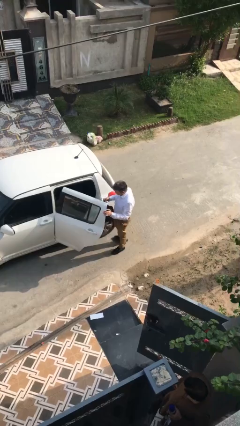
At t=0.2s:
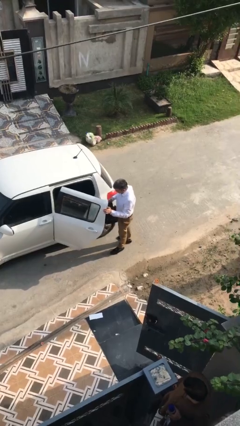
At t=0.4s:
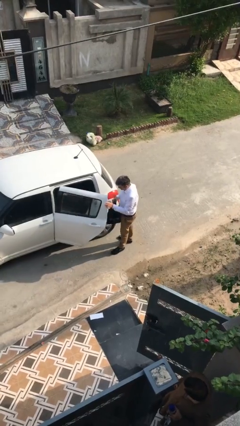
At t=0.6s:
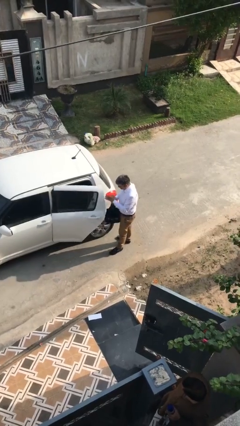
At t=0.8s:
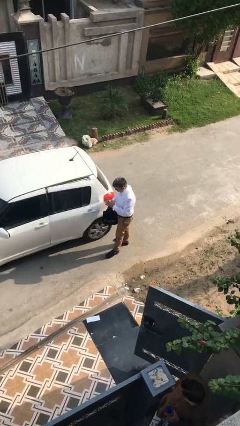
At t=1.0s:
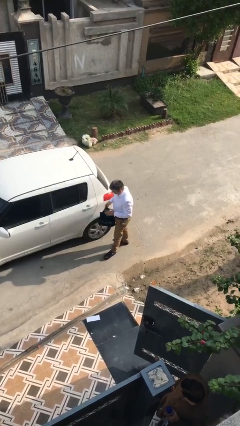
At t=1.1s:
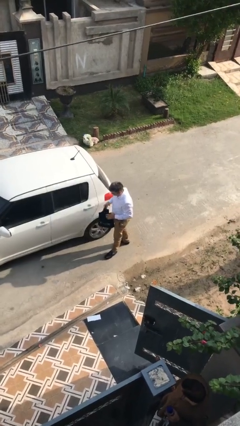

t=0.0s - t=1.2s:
person closes car door

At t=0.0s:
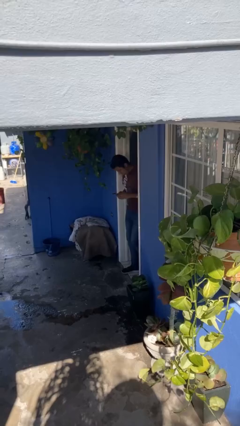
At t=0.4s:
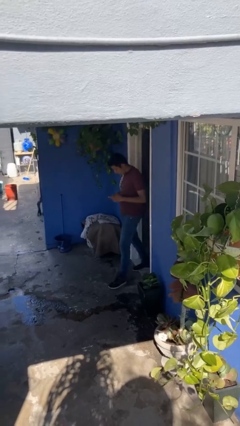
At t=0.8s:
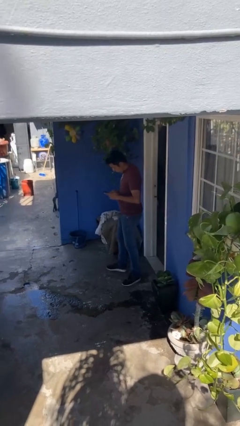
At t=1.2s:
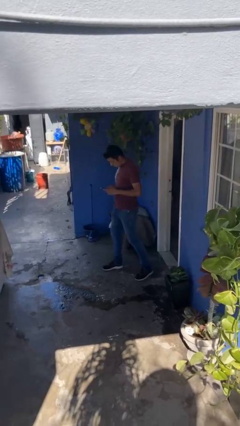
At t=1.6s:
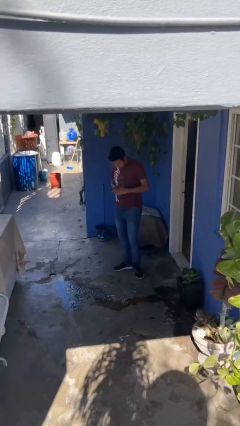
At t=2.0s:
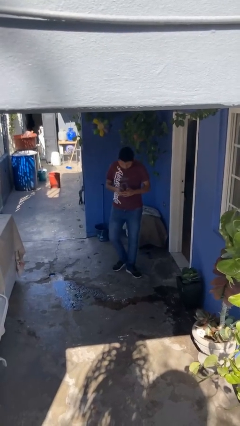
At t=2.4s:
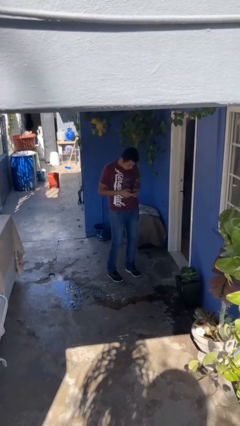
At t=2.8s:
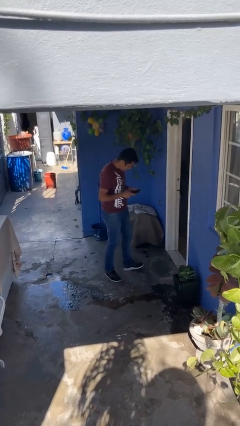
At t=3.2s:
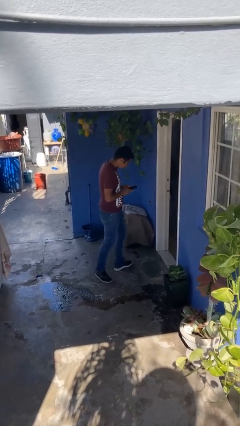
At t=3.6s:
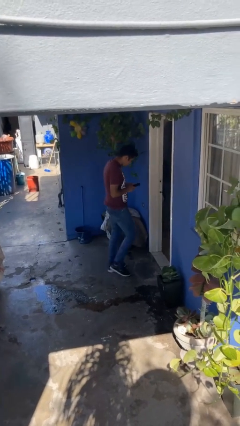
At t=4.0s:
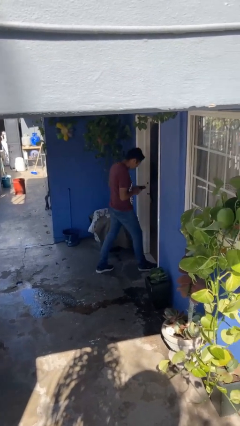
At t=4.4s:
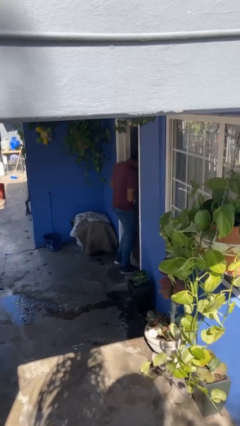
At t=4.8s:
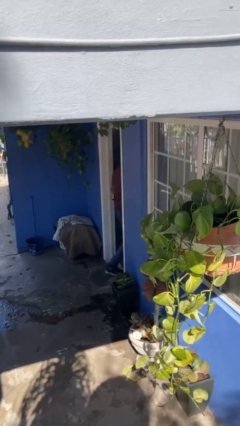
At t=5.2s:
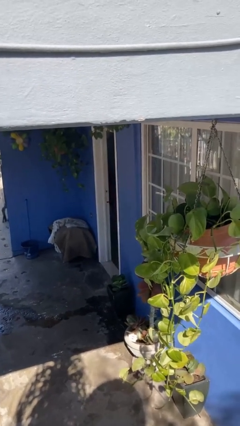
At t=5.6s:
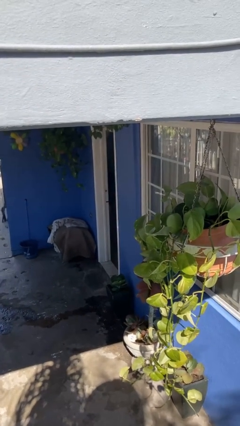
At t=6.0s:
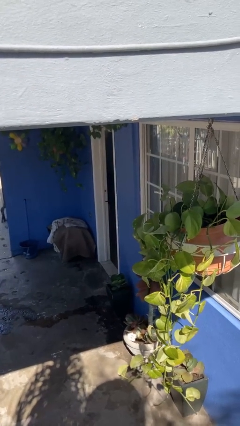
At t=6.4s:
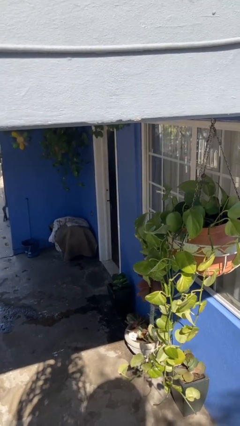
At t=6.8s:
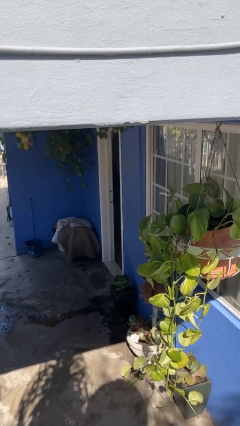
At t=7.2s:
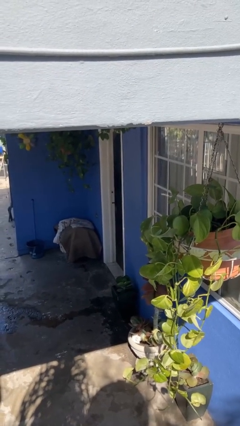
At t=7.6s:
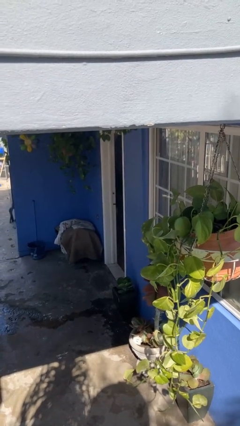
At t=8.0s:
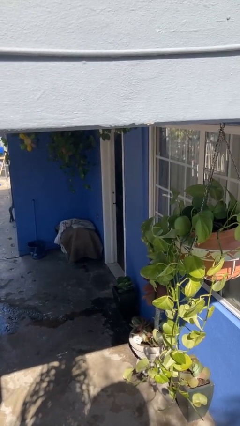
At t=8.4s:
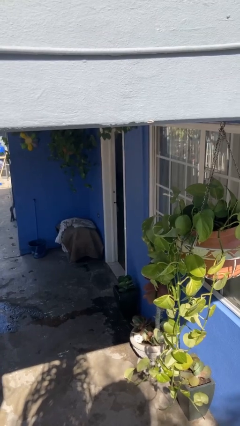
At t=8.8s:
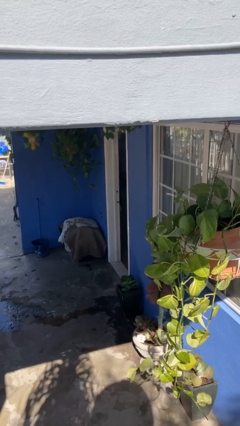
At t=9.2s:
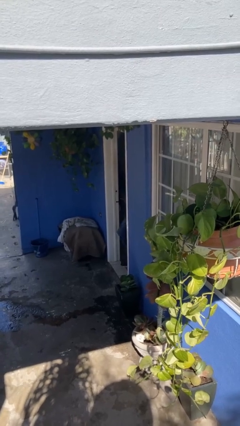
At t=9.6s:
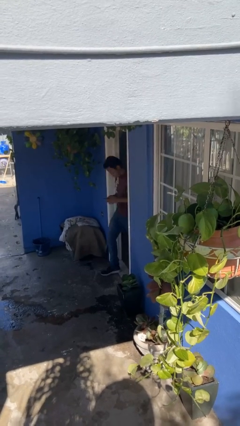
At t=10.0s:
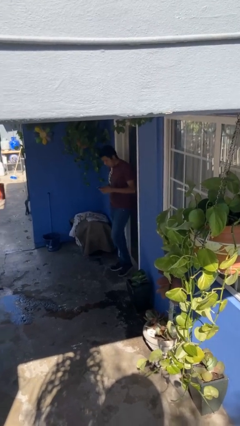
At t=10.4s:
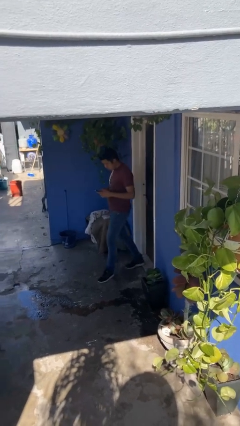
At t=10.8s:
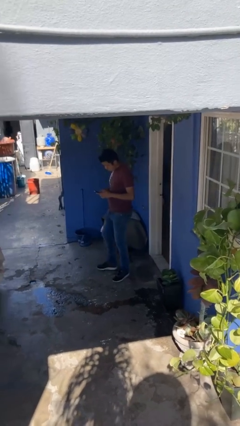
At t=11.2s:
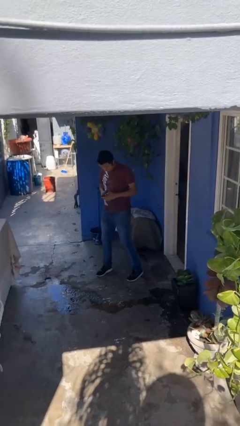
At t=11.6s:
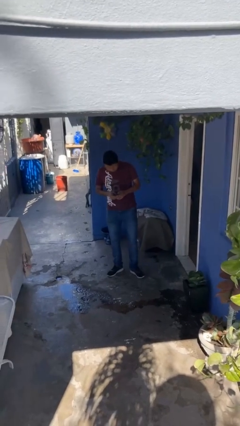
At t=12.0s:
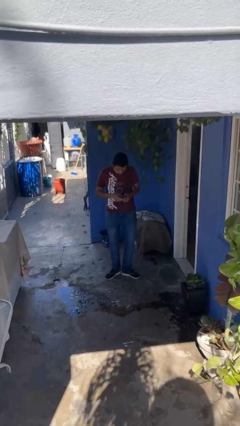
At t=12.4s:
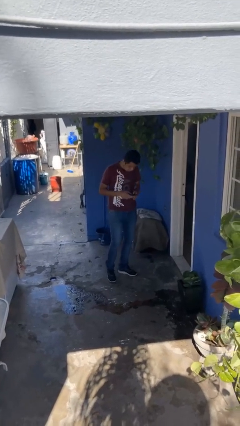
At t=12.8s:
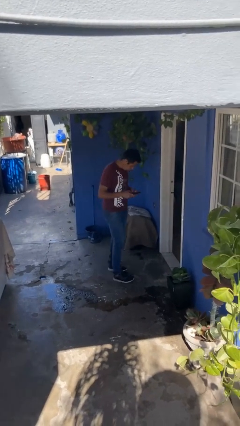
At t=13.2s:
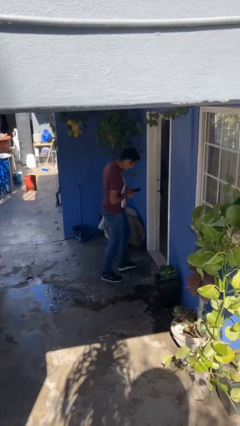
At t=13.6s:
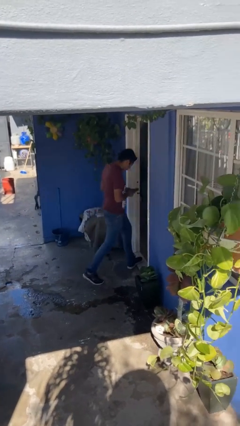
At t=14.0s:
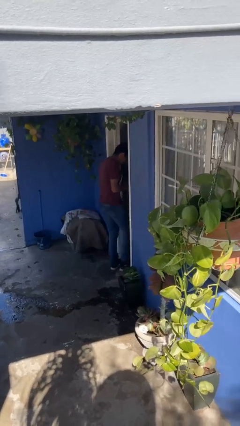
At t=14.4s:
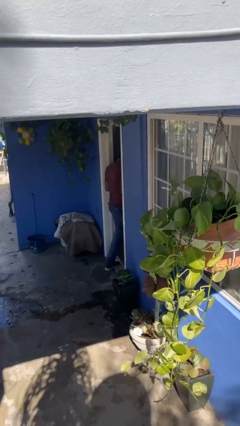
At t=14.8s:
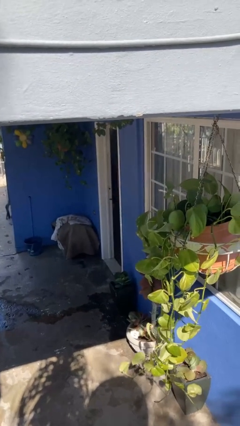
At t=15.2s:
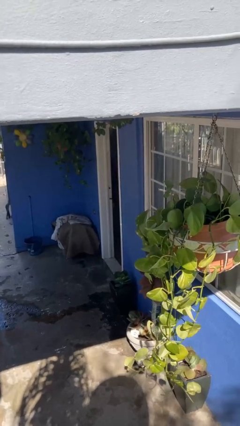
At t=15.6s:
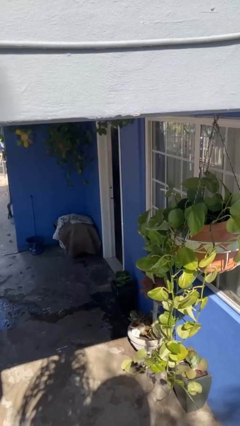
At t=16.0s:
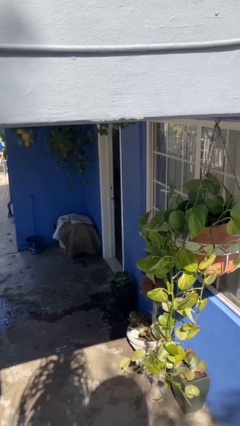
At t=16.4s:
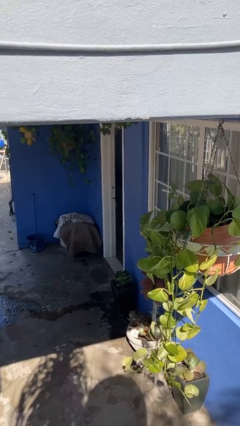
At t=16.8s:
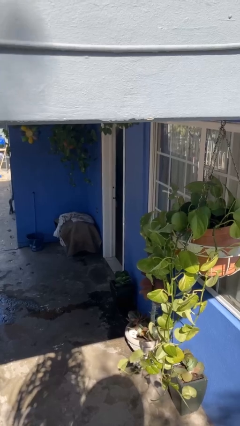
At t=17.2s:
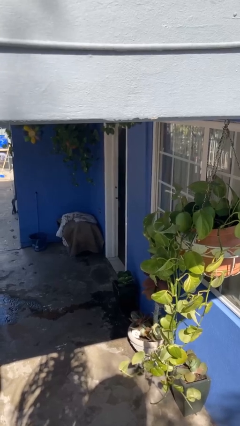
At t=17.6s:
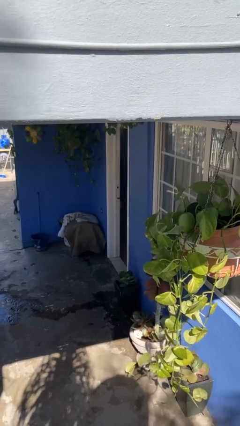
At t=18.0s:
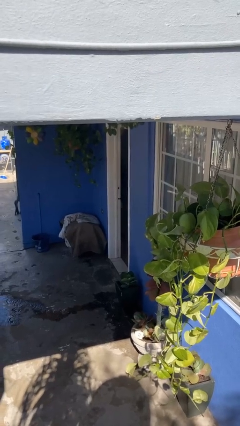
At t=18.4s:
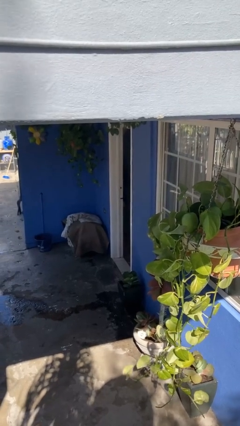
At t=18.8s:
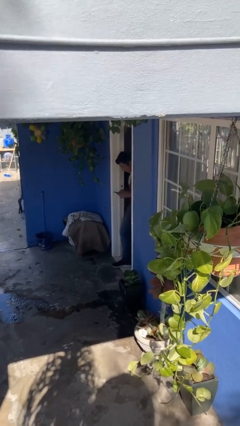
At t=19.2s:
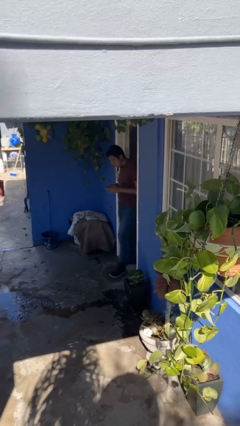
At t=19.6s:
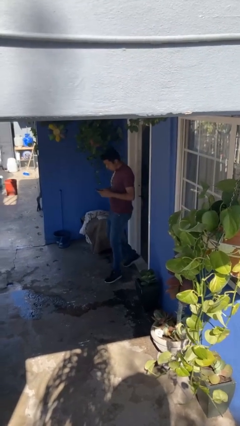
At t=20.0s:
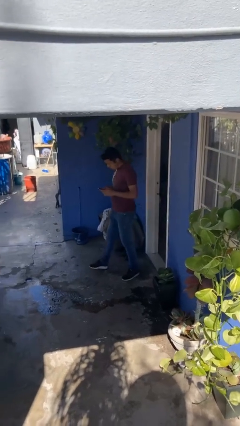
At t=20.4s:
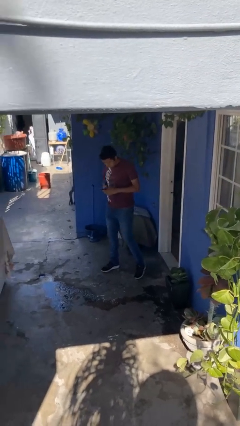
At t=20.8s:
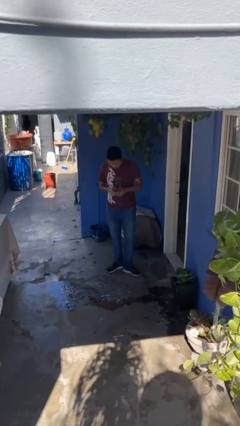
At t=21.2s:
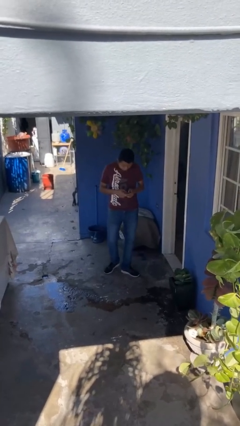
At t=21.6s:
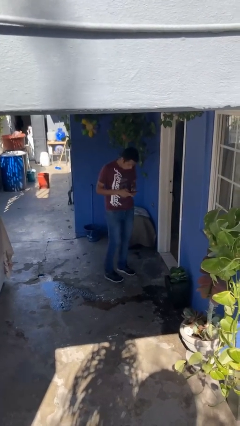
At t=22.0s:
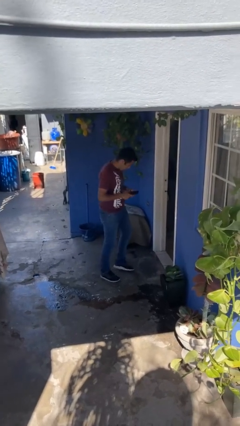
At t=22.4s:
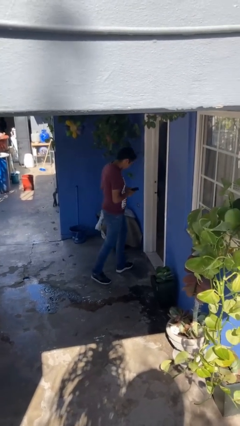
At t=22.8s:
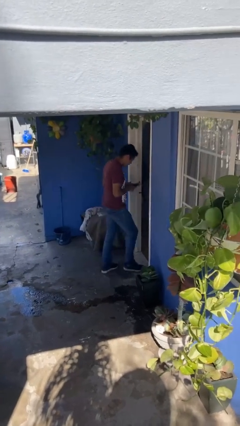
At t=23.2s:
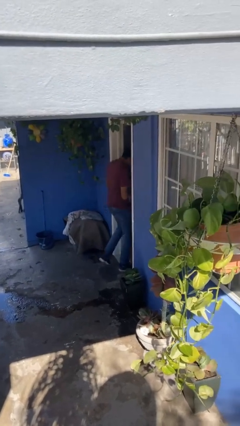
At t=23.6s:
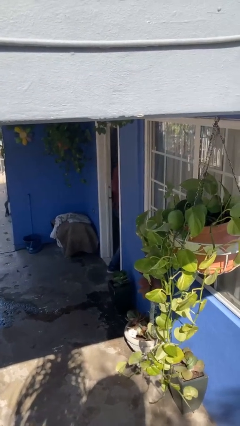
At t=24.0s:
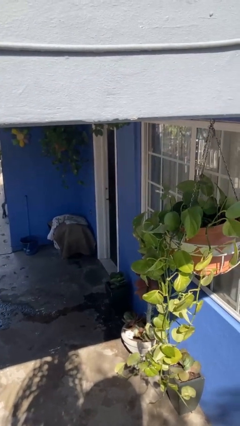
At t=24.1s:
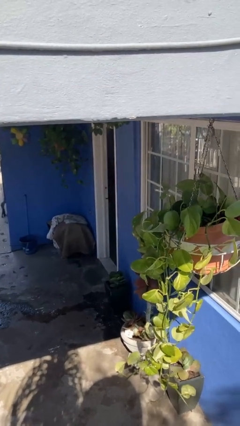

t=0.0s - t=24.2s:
person texts on phone

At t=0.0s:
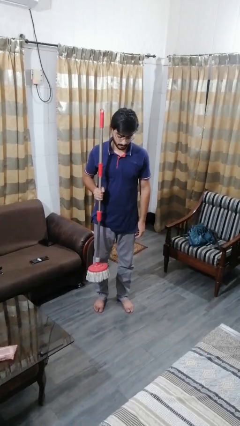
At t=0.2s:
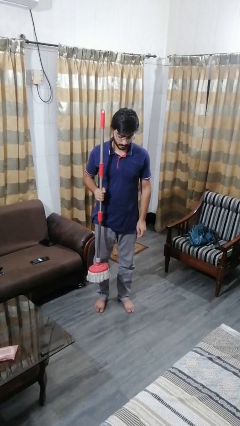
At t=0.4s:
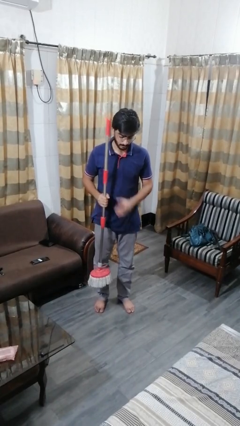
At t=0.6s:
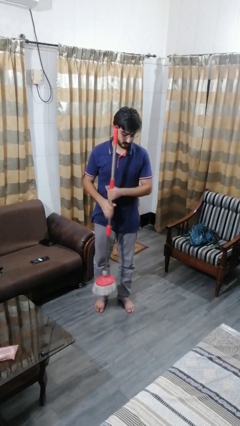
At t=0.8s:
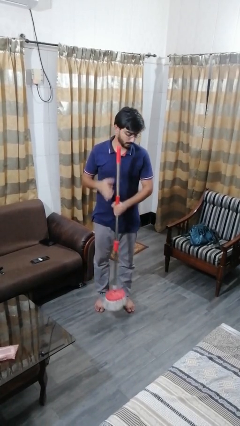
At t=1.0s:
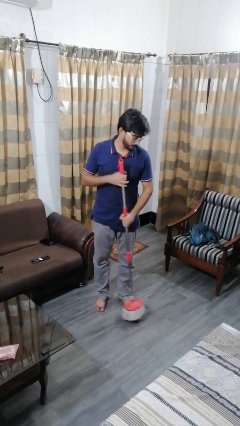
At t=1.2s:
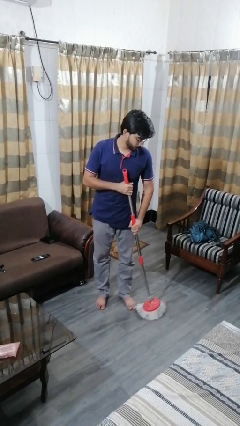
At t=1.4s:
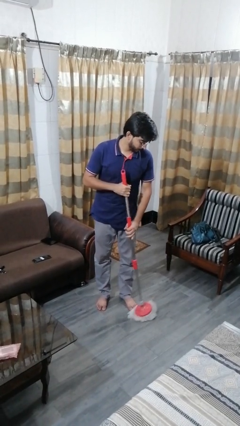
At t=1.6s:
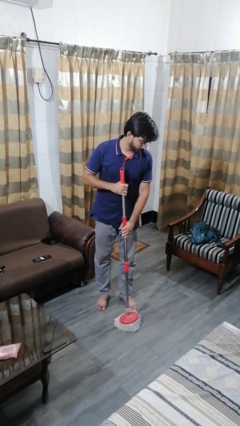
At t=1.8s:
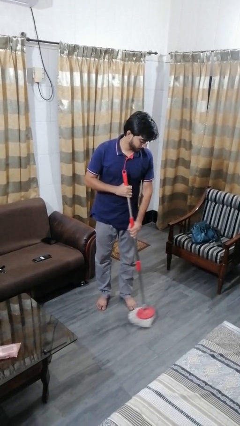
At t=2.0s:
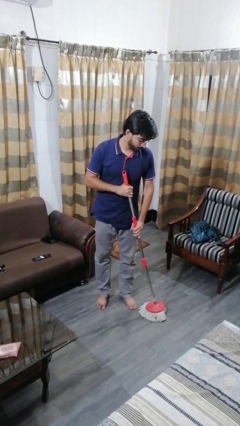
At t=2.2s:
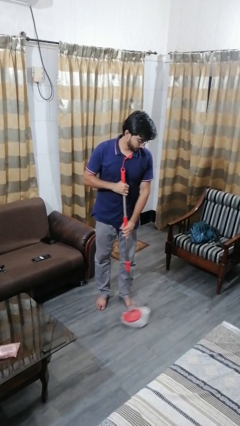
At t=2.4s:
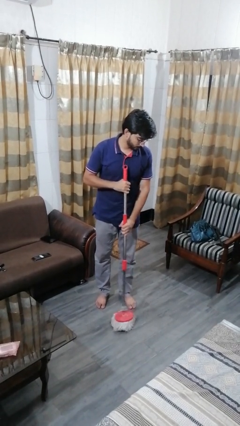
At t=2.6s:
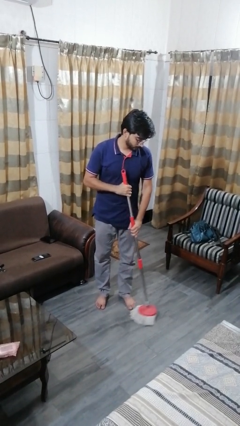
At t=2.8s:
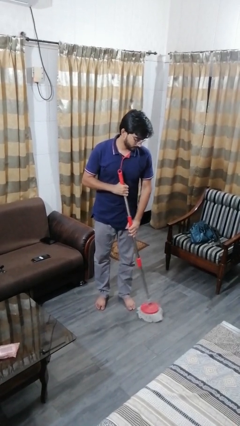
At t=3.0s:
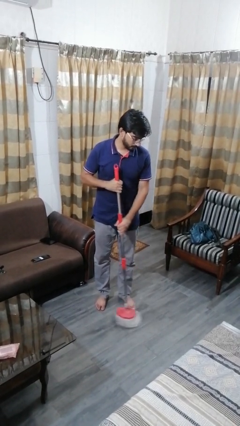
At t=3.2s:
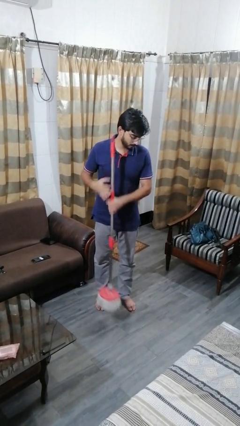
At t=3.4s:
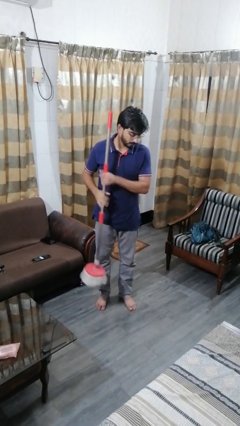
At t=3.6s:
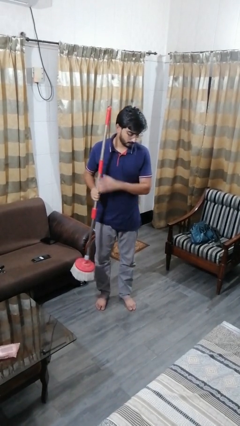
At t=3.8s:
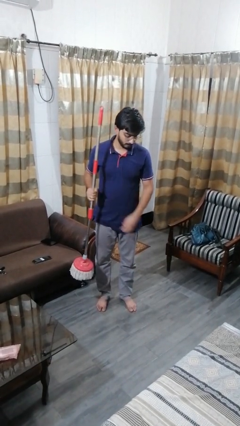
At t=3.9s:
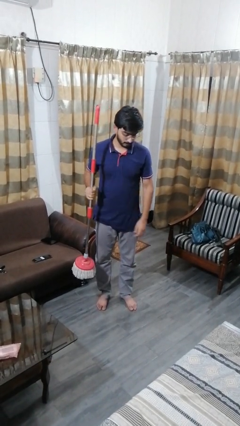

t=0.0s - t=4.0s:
person sweeps floor

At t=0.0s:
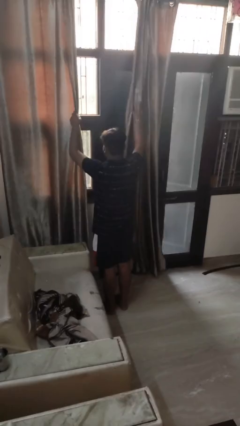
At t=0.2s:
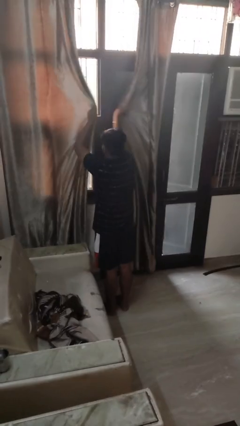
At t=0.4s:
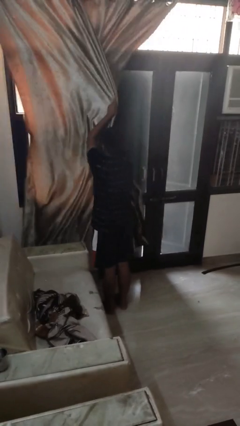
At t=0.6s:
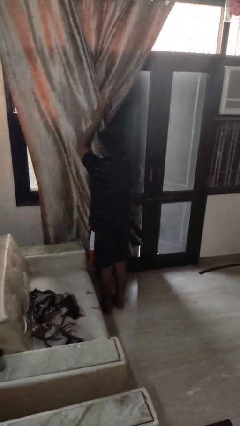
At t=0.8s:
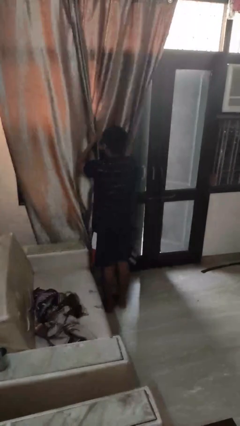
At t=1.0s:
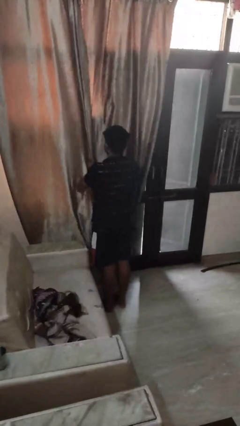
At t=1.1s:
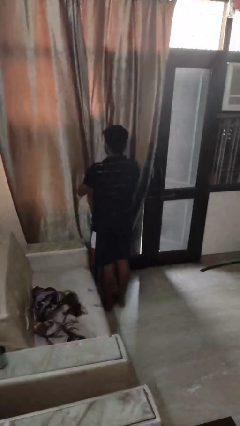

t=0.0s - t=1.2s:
person closes curtains
